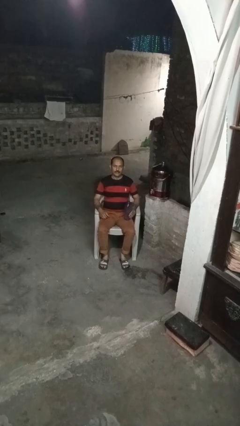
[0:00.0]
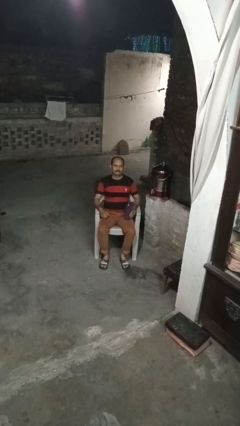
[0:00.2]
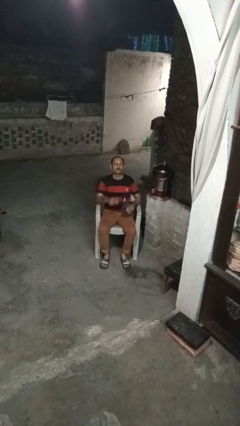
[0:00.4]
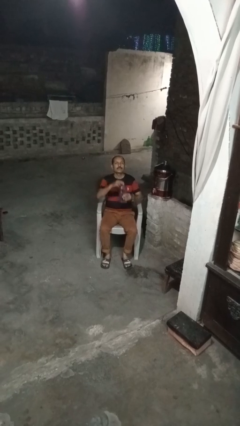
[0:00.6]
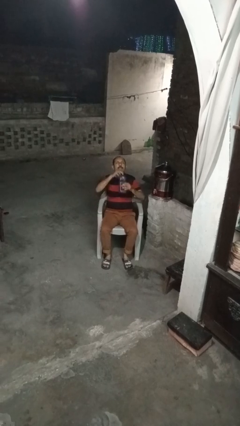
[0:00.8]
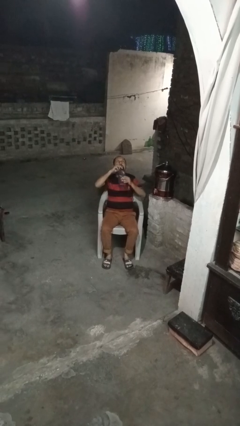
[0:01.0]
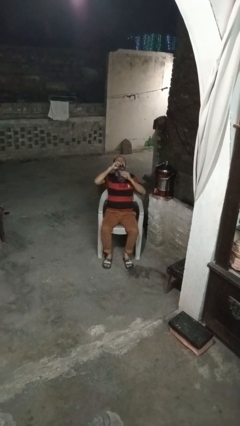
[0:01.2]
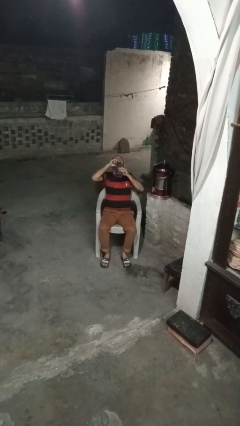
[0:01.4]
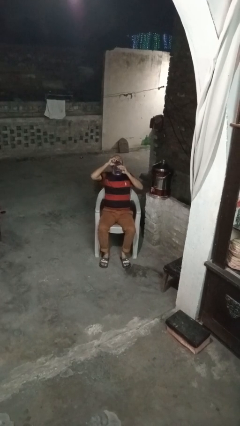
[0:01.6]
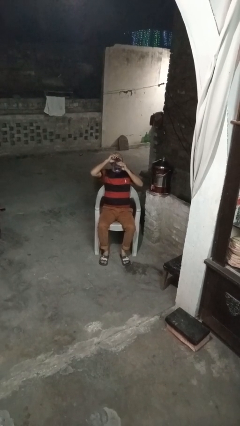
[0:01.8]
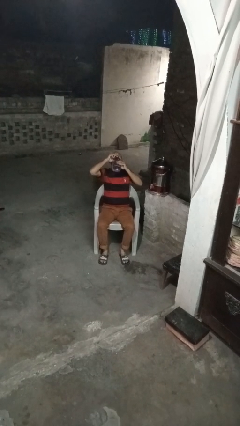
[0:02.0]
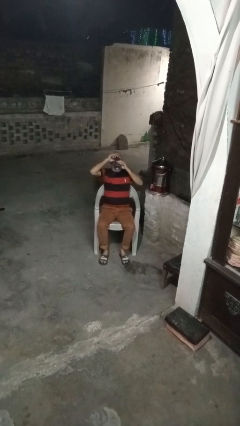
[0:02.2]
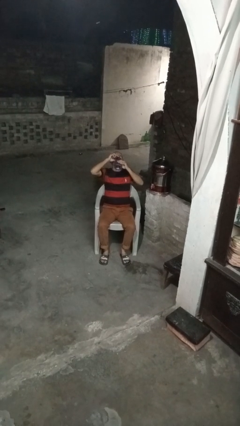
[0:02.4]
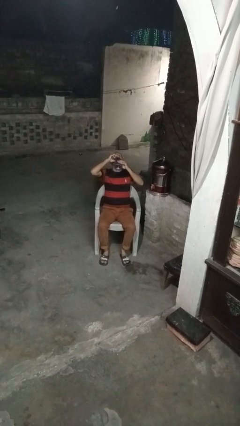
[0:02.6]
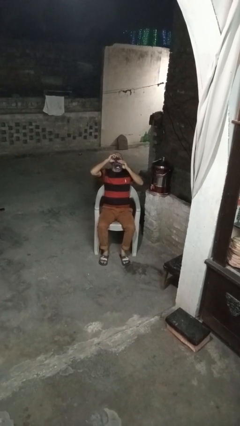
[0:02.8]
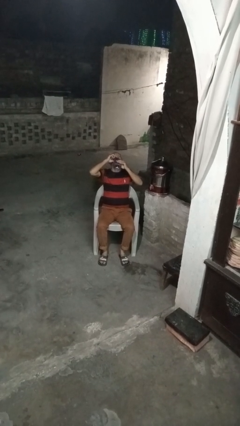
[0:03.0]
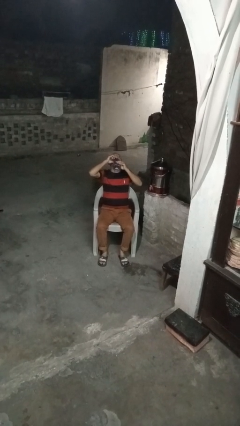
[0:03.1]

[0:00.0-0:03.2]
person drinks from bottle

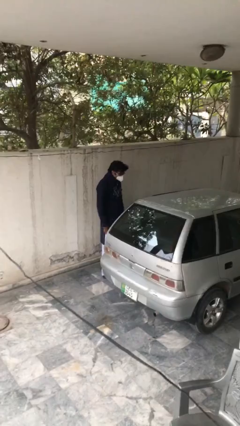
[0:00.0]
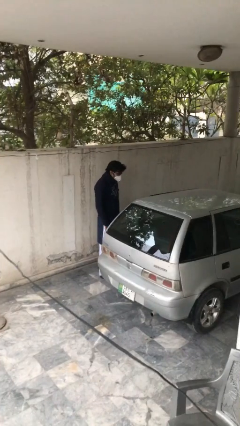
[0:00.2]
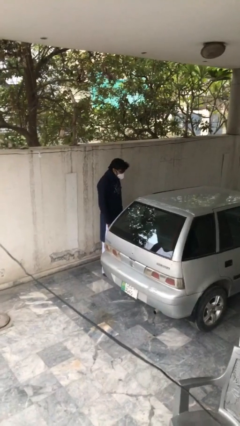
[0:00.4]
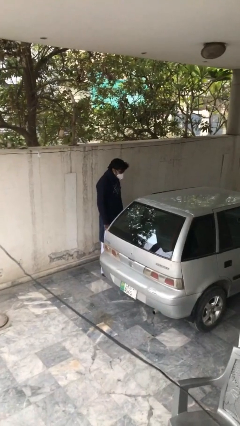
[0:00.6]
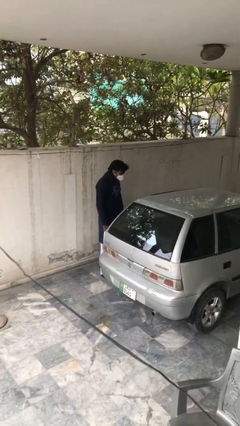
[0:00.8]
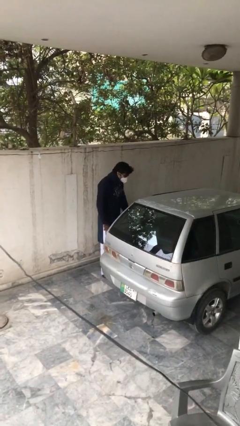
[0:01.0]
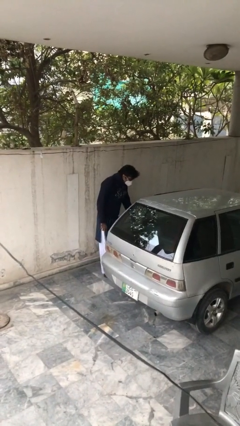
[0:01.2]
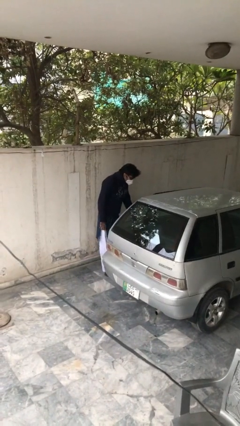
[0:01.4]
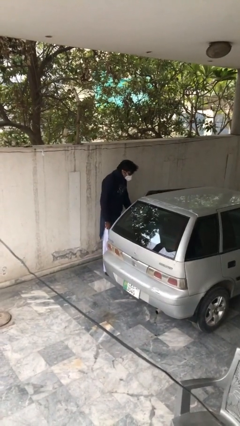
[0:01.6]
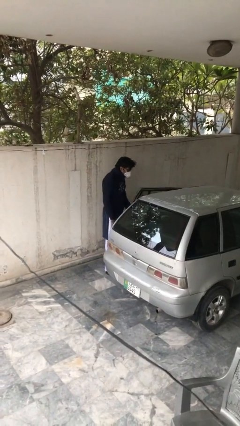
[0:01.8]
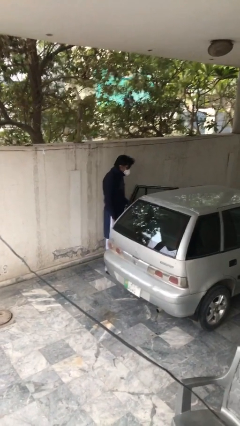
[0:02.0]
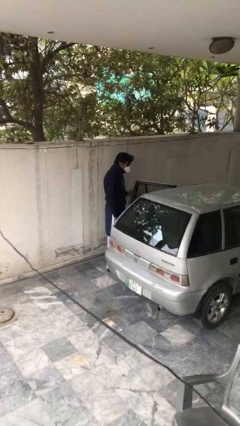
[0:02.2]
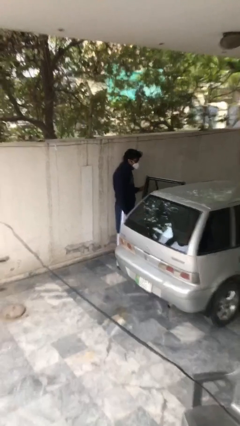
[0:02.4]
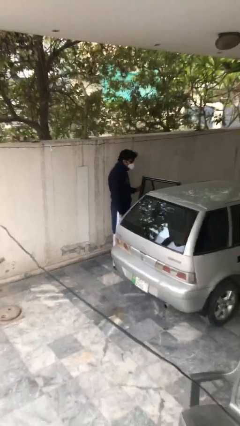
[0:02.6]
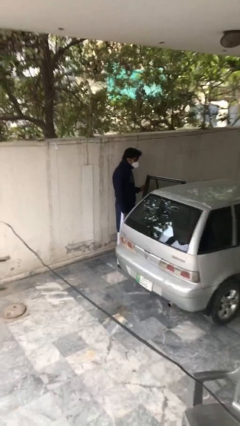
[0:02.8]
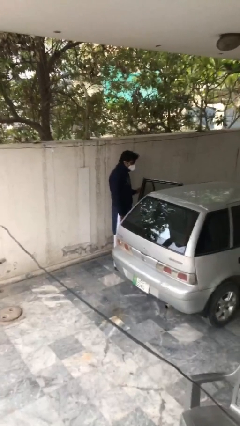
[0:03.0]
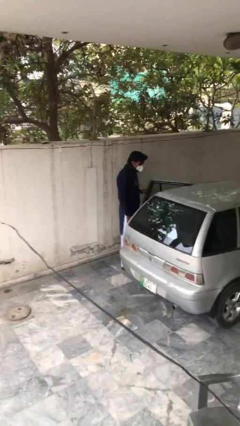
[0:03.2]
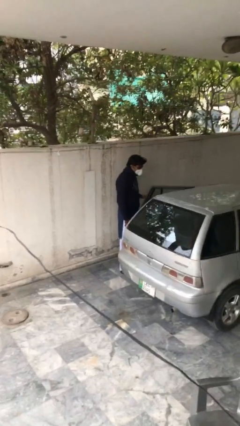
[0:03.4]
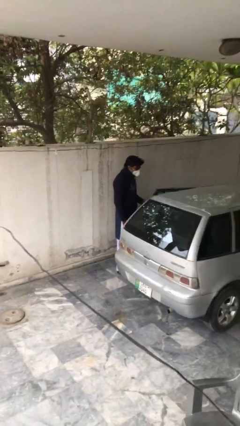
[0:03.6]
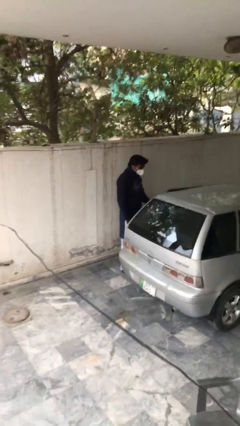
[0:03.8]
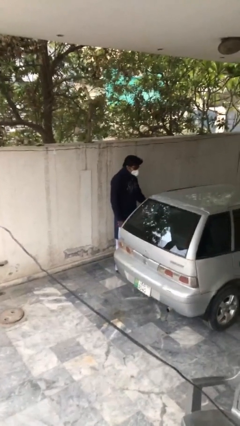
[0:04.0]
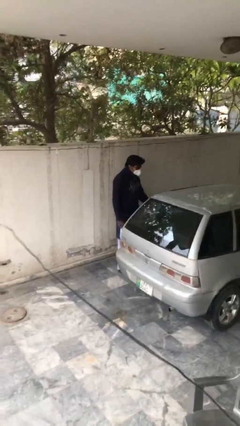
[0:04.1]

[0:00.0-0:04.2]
person opens car door

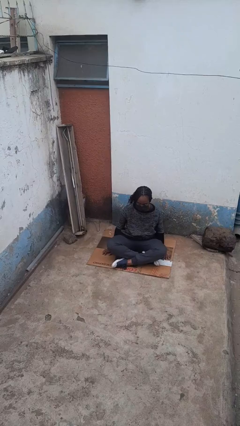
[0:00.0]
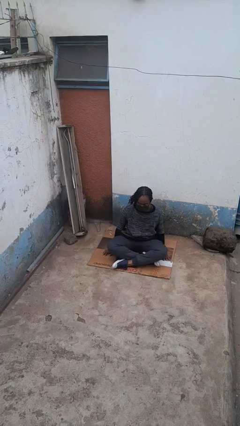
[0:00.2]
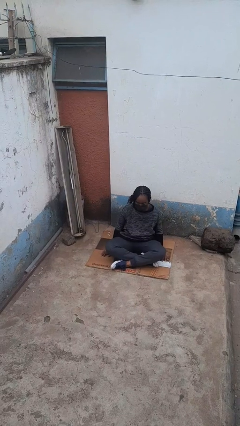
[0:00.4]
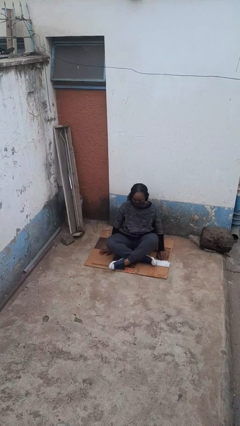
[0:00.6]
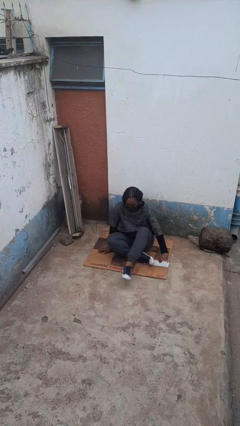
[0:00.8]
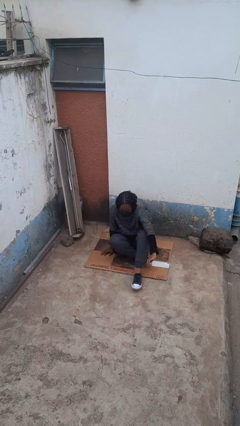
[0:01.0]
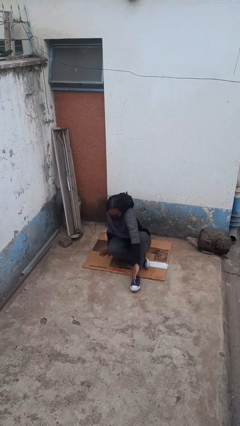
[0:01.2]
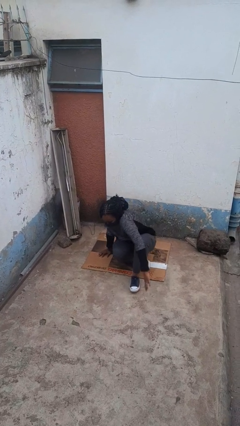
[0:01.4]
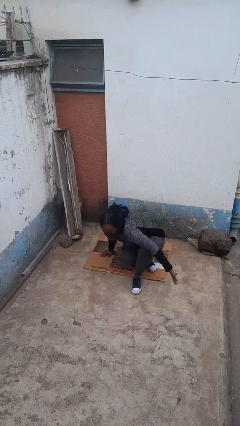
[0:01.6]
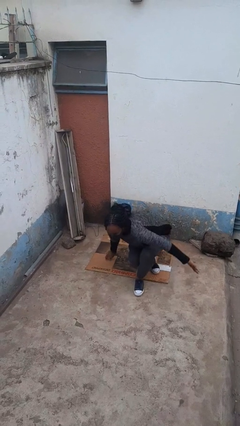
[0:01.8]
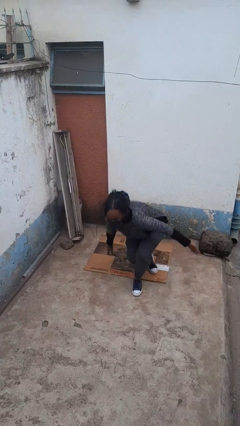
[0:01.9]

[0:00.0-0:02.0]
person sits crisscross

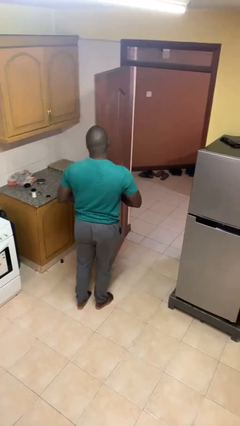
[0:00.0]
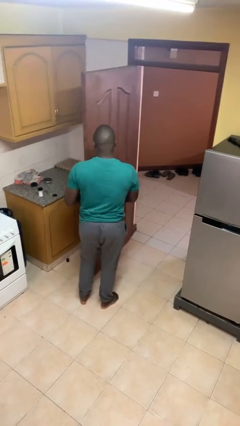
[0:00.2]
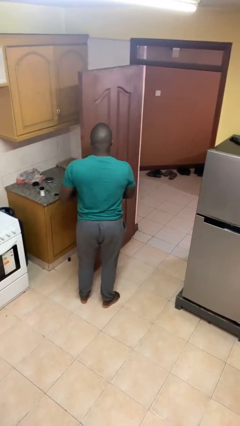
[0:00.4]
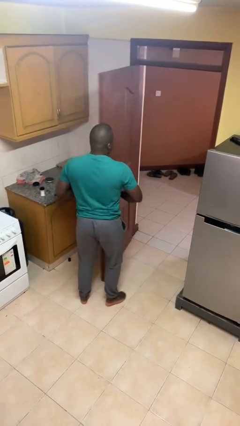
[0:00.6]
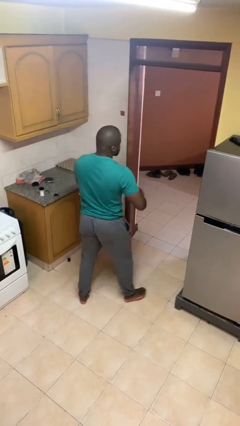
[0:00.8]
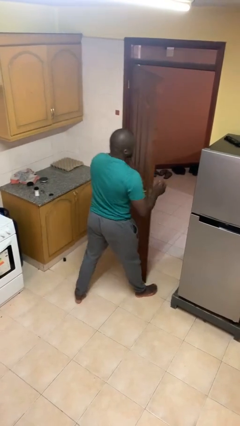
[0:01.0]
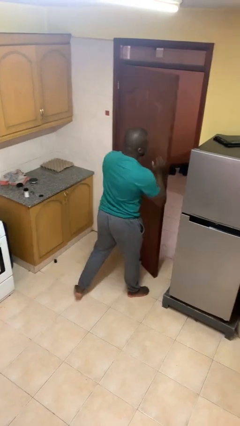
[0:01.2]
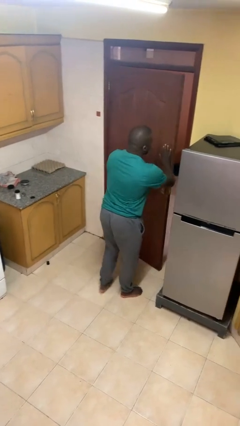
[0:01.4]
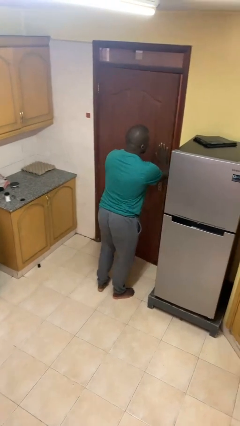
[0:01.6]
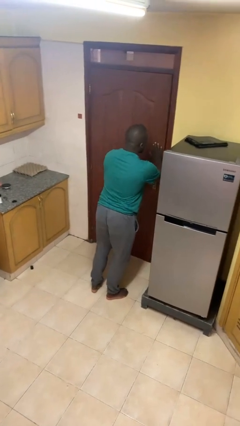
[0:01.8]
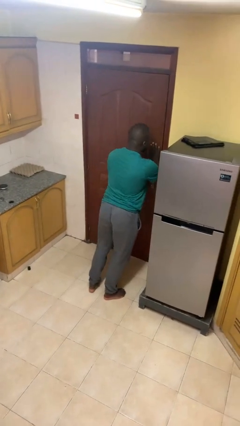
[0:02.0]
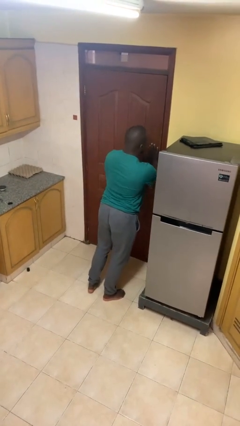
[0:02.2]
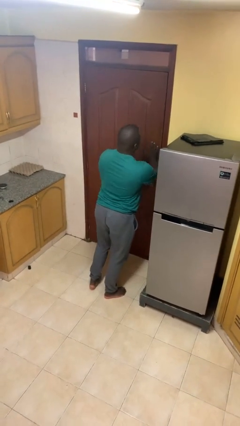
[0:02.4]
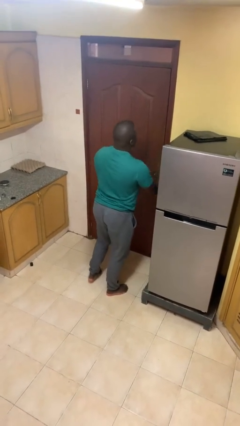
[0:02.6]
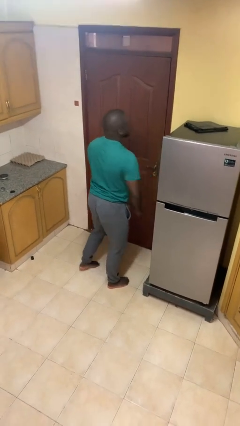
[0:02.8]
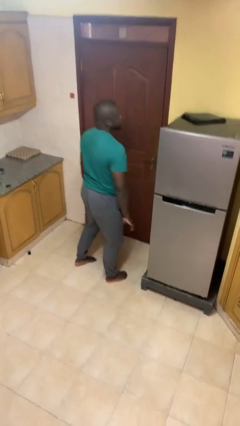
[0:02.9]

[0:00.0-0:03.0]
person closes facility door

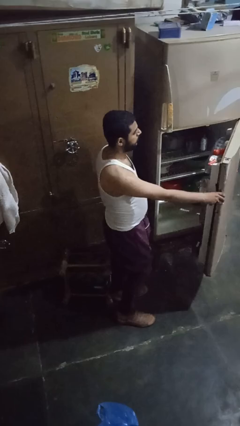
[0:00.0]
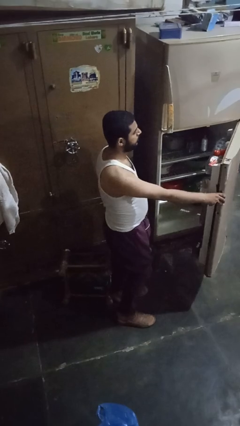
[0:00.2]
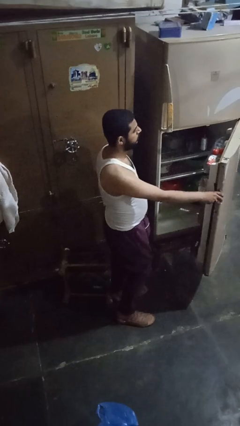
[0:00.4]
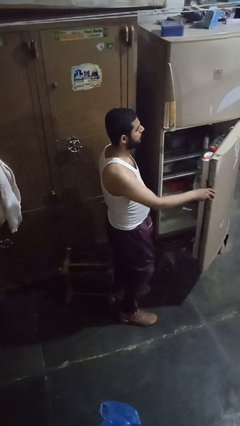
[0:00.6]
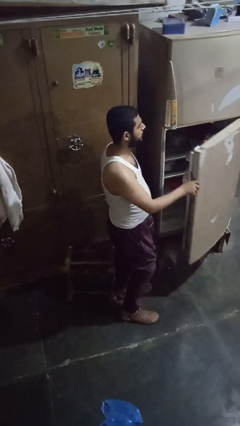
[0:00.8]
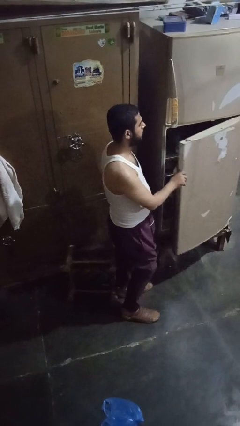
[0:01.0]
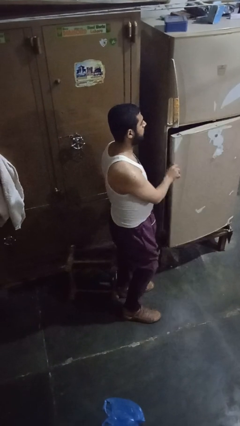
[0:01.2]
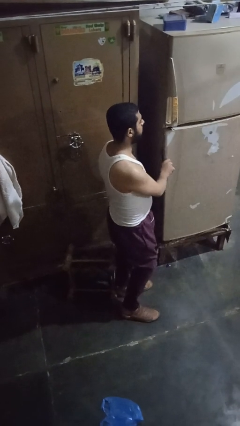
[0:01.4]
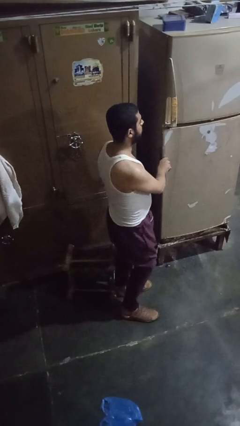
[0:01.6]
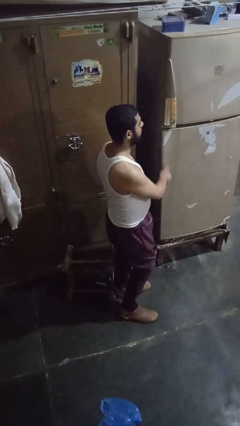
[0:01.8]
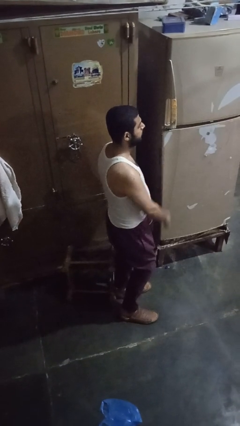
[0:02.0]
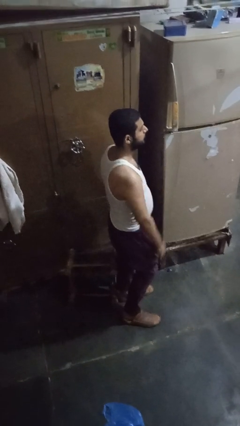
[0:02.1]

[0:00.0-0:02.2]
person closes refrigerator

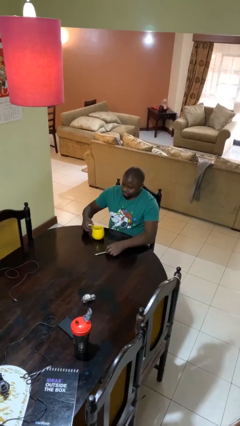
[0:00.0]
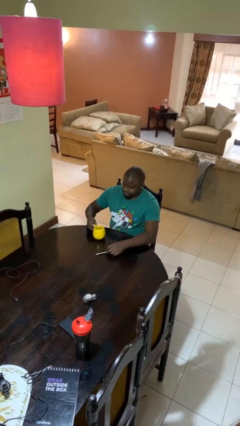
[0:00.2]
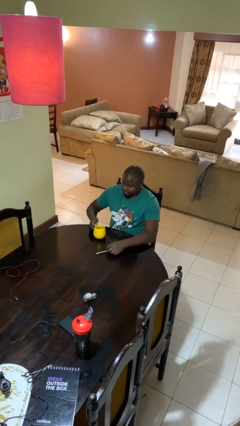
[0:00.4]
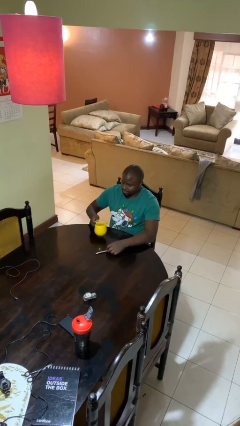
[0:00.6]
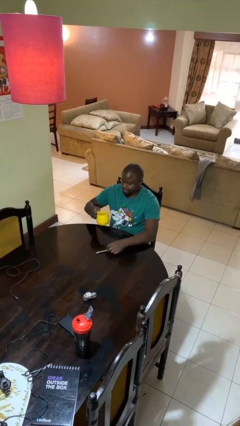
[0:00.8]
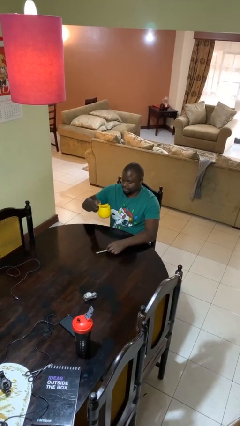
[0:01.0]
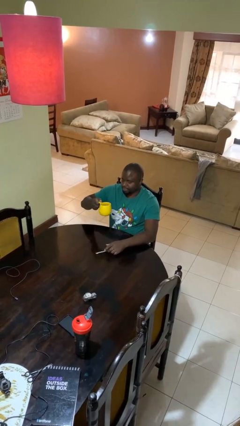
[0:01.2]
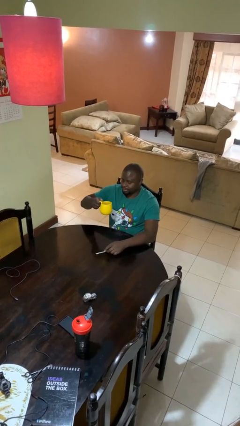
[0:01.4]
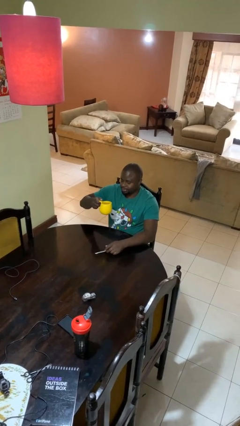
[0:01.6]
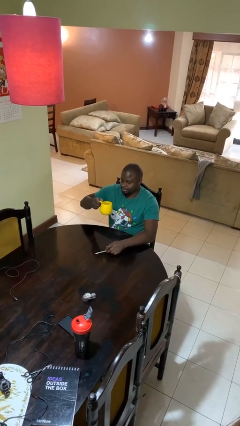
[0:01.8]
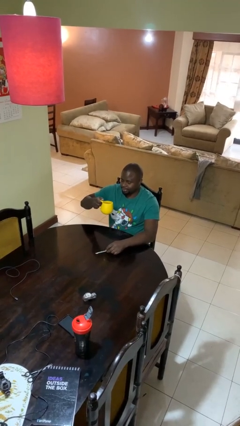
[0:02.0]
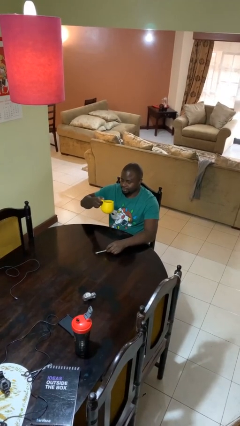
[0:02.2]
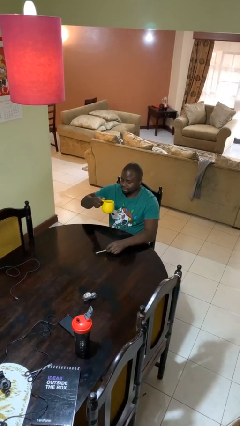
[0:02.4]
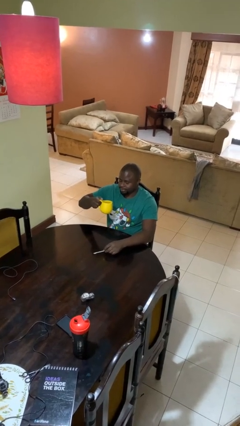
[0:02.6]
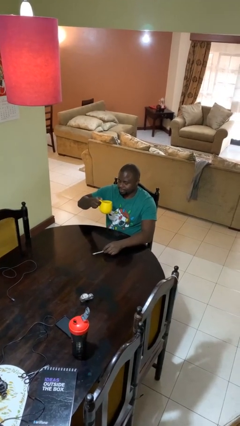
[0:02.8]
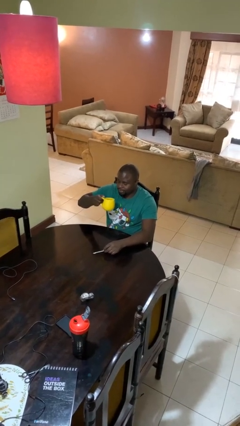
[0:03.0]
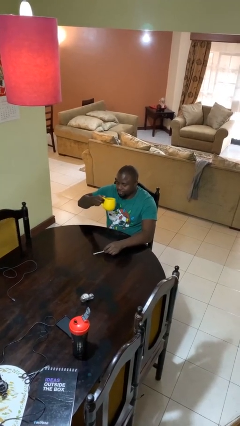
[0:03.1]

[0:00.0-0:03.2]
person picks up object from table
